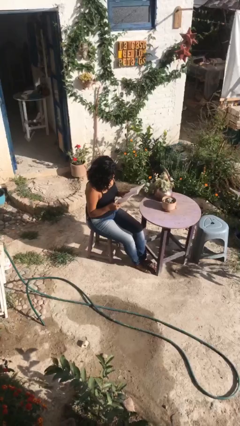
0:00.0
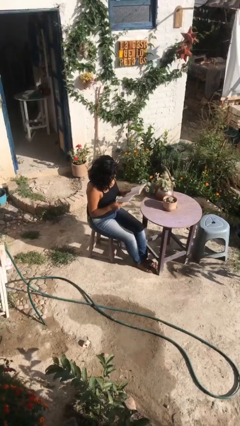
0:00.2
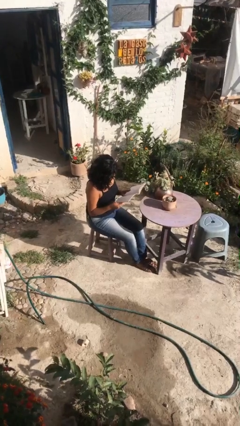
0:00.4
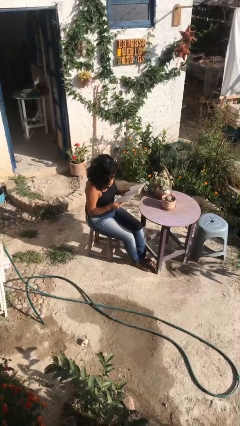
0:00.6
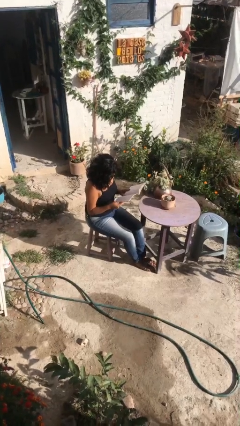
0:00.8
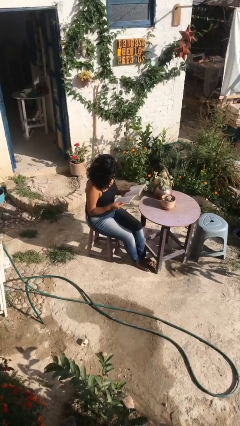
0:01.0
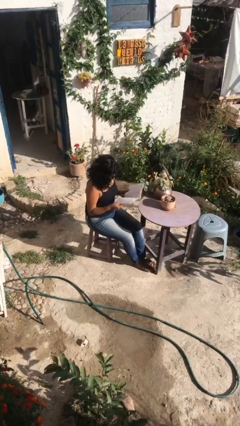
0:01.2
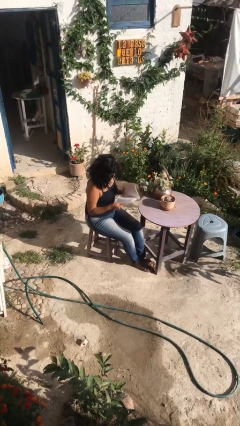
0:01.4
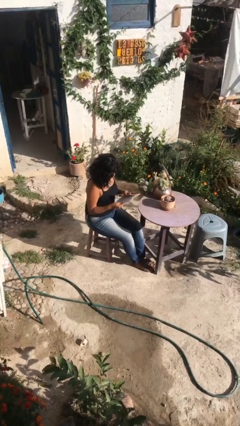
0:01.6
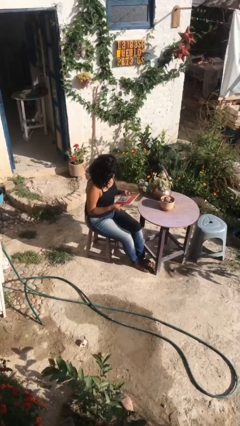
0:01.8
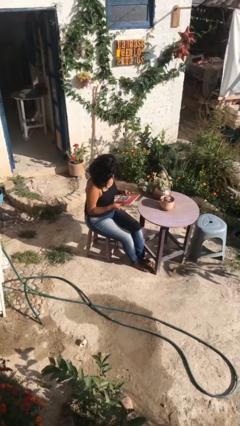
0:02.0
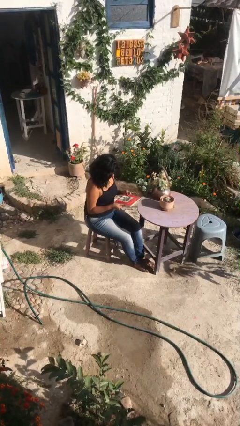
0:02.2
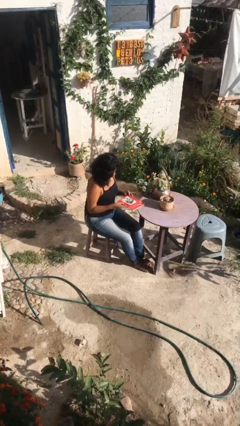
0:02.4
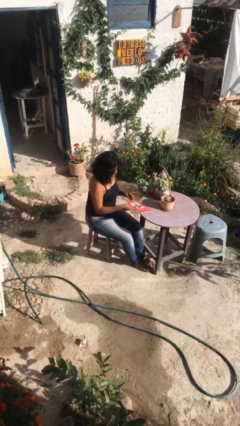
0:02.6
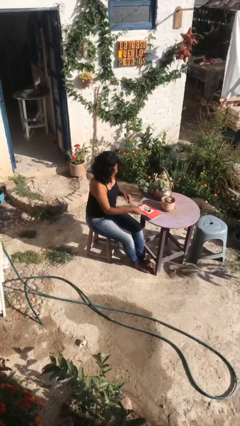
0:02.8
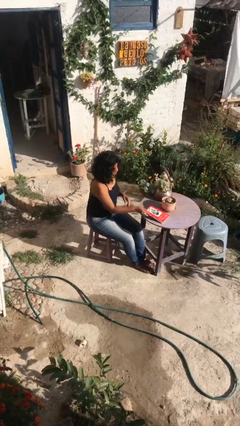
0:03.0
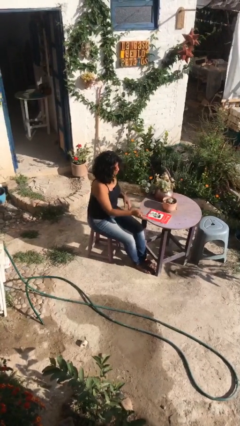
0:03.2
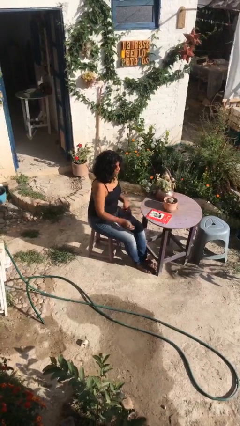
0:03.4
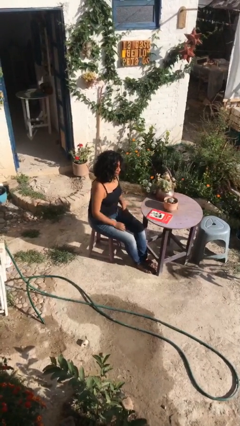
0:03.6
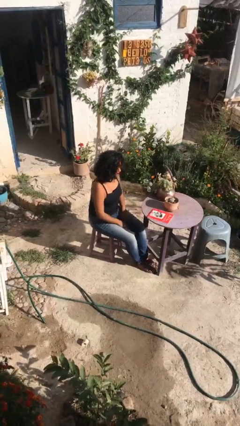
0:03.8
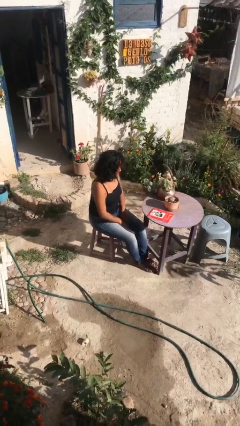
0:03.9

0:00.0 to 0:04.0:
person puts down object on table

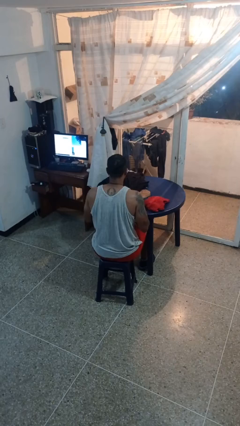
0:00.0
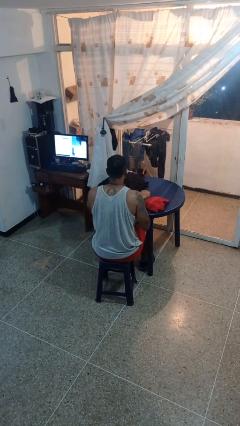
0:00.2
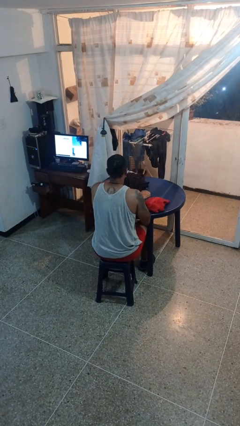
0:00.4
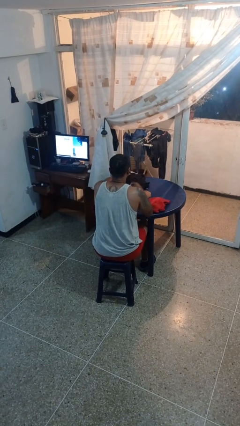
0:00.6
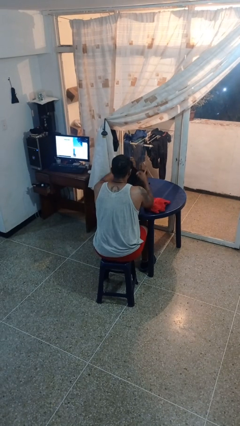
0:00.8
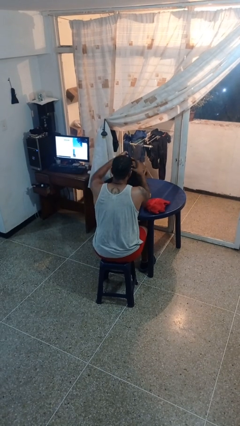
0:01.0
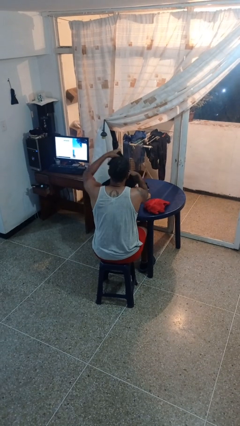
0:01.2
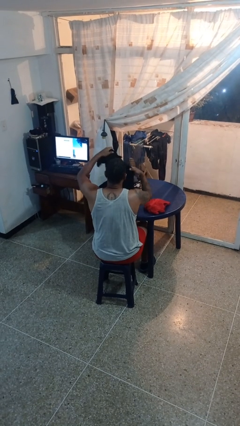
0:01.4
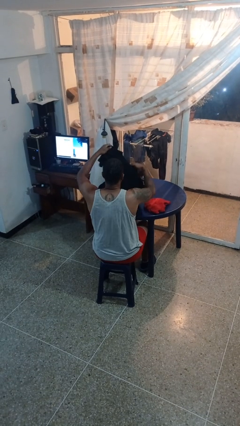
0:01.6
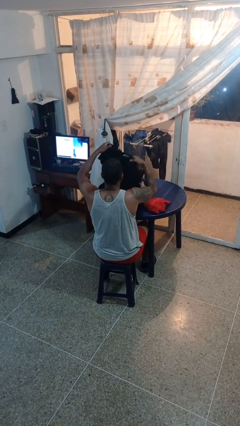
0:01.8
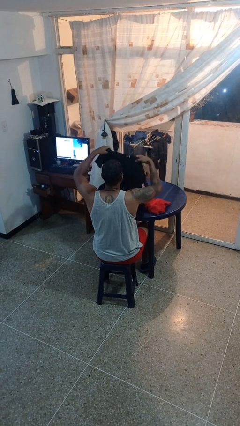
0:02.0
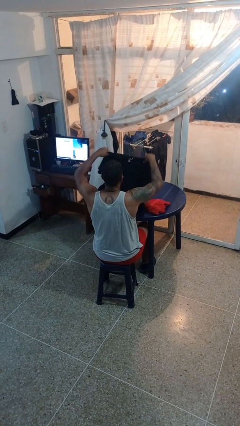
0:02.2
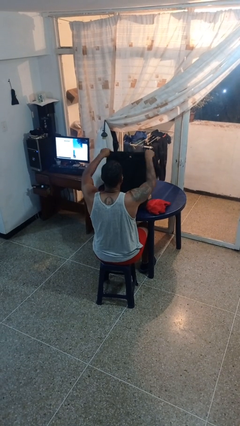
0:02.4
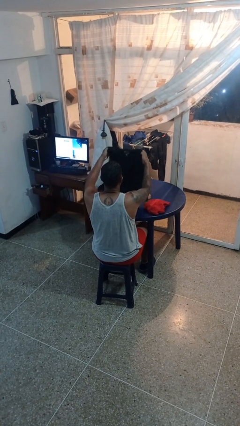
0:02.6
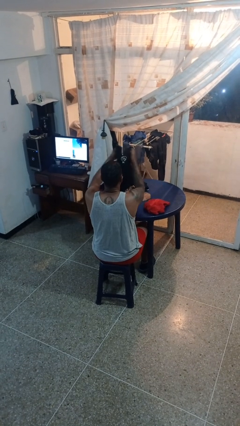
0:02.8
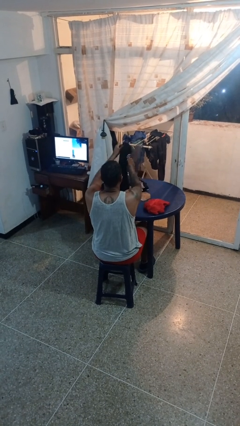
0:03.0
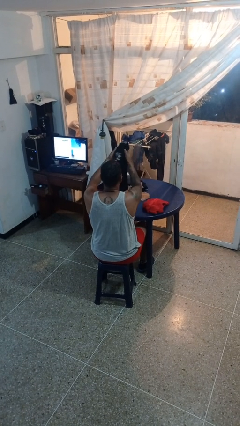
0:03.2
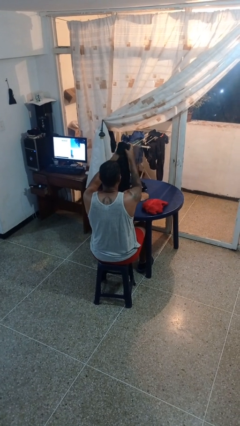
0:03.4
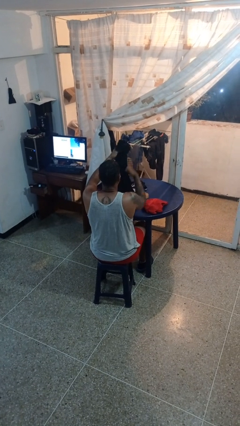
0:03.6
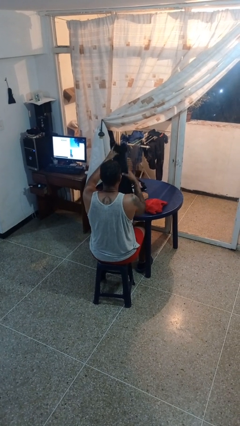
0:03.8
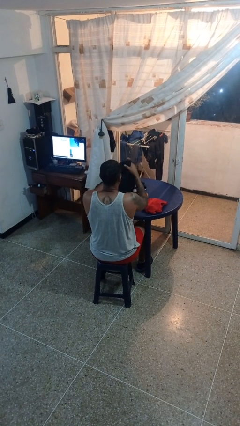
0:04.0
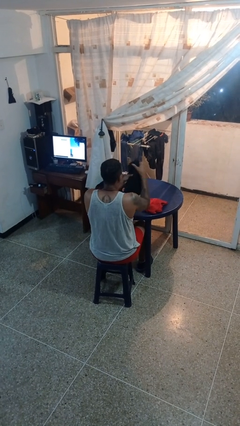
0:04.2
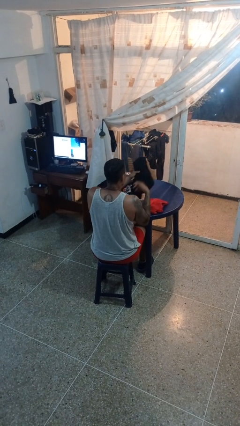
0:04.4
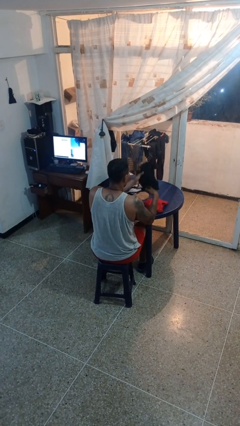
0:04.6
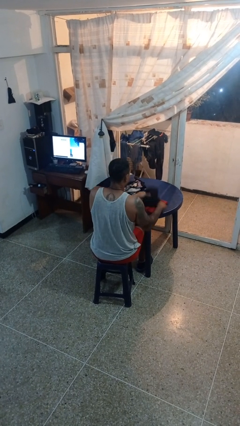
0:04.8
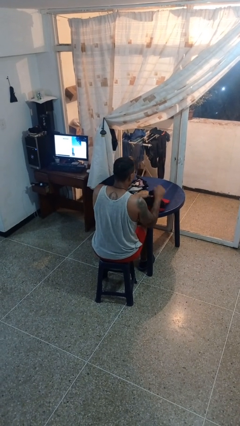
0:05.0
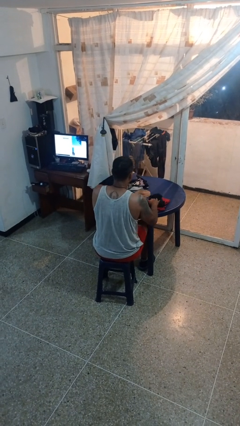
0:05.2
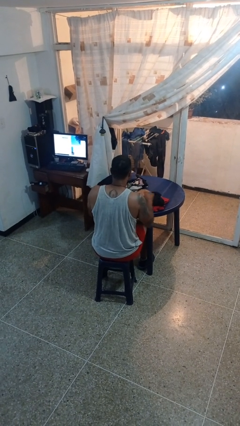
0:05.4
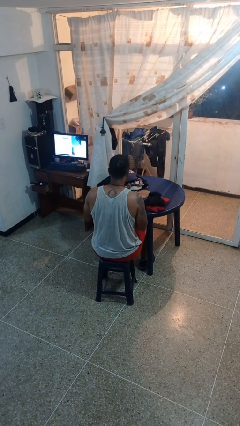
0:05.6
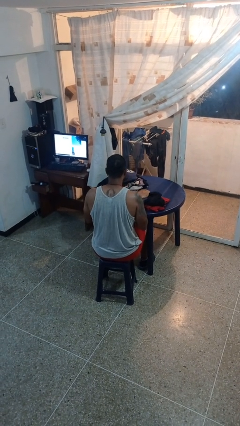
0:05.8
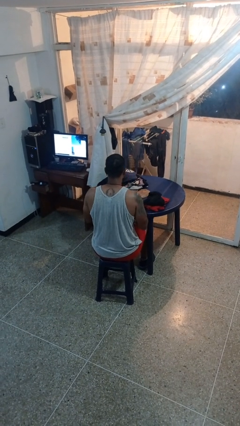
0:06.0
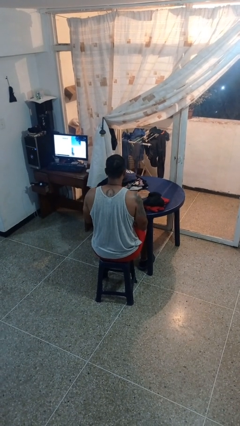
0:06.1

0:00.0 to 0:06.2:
person folds shirt

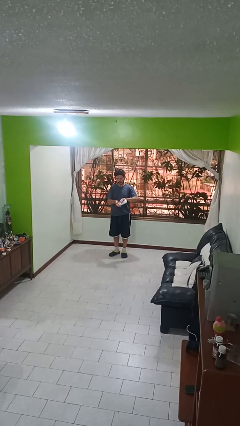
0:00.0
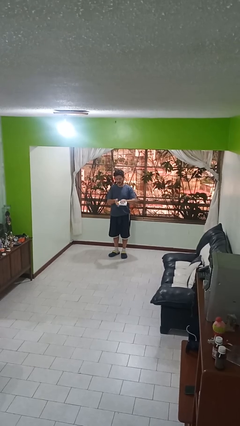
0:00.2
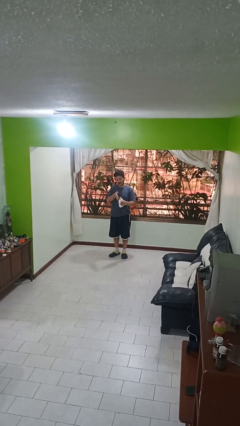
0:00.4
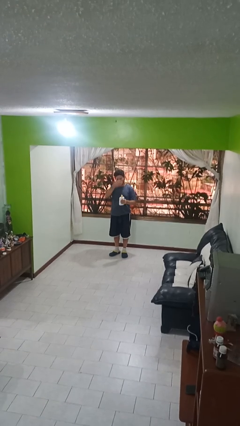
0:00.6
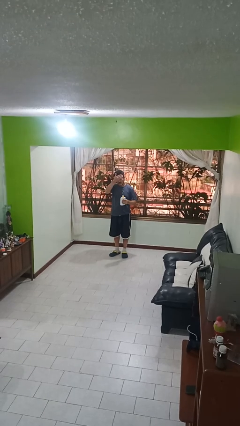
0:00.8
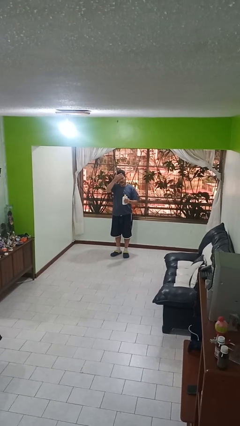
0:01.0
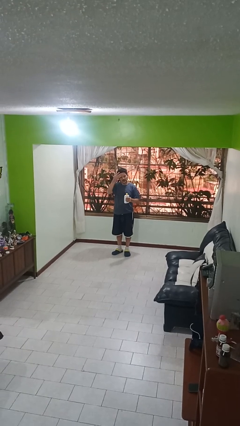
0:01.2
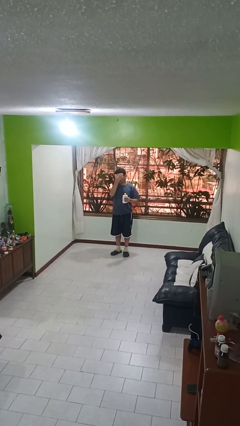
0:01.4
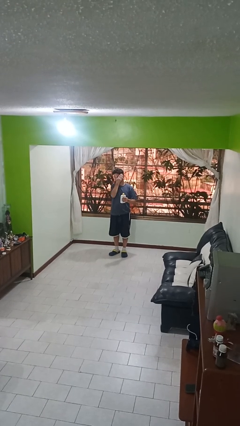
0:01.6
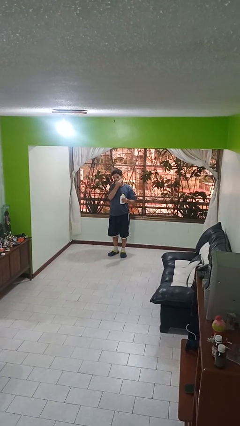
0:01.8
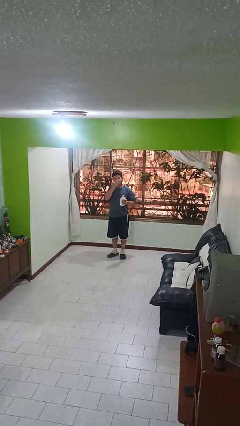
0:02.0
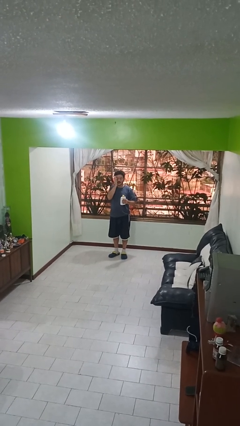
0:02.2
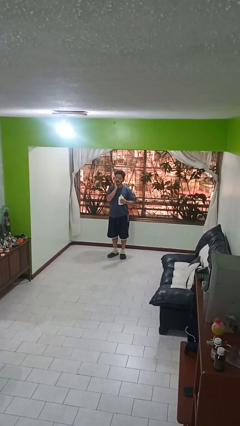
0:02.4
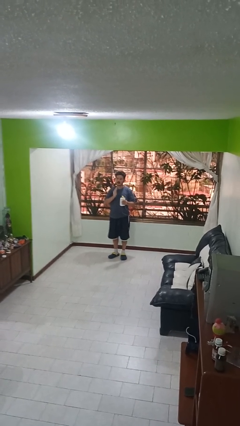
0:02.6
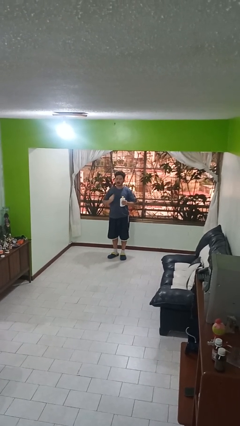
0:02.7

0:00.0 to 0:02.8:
person applies facial moisturizer

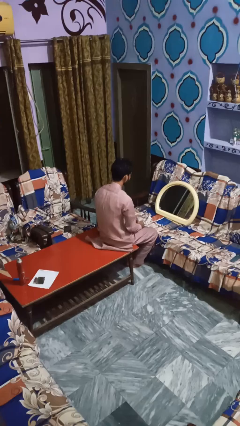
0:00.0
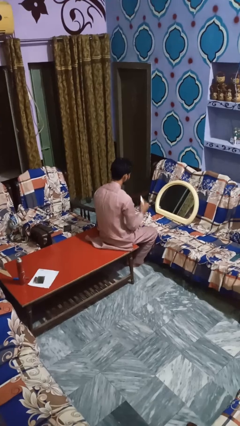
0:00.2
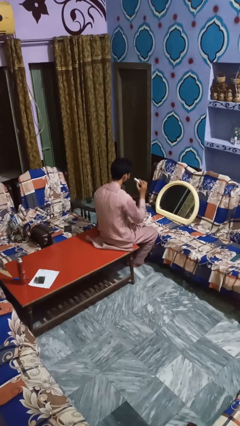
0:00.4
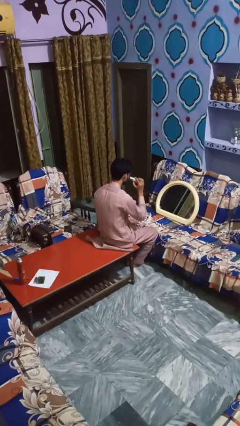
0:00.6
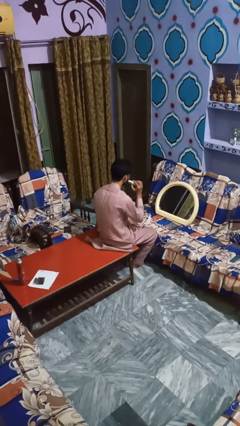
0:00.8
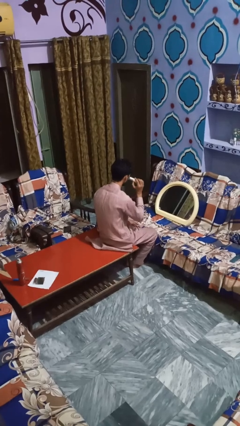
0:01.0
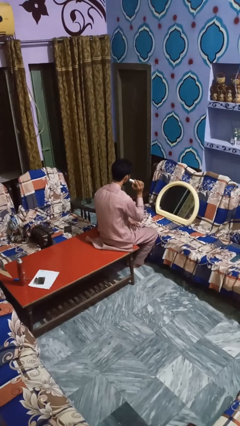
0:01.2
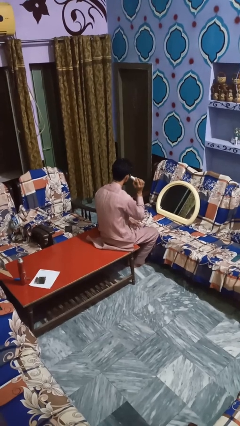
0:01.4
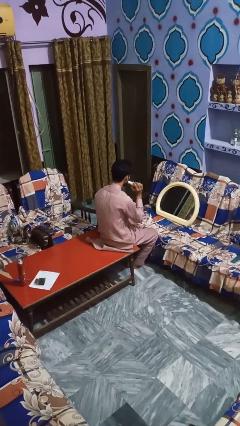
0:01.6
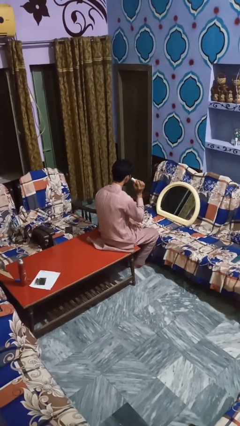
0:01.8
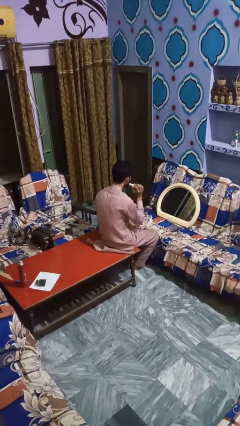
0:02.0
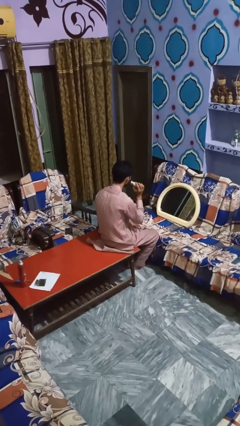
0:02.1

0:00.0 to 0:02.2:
person applies foundation makeup

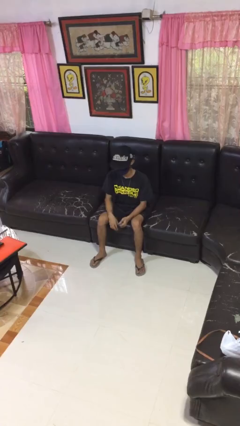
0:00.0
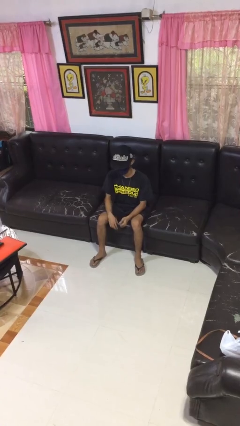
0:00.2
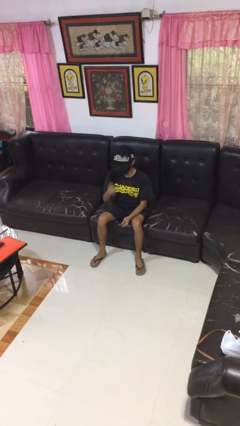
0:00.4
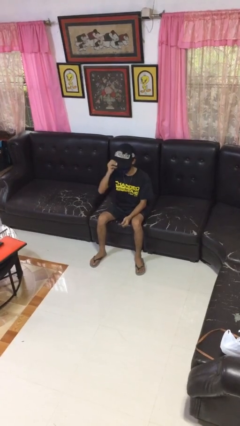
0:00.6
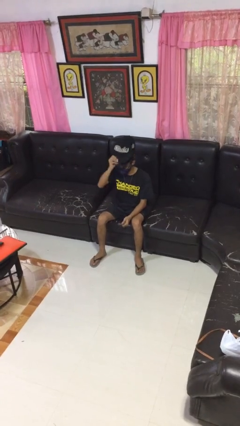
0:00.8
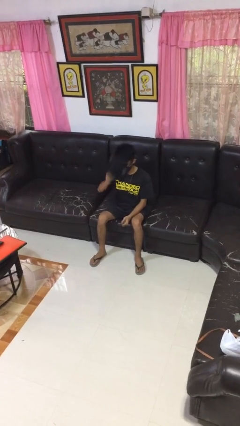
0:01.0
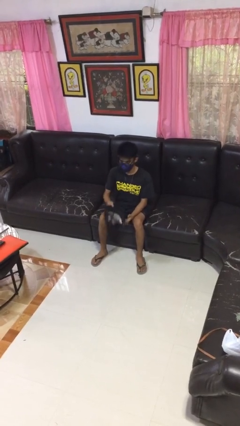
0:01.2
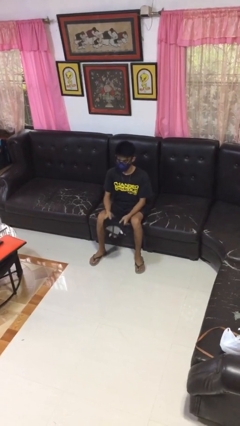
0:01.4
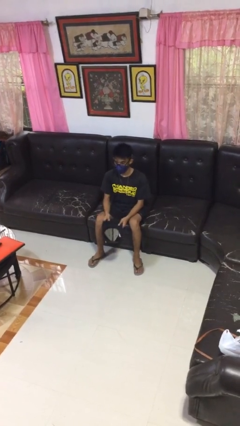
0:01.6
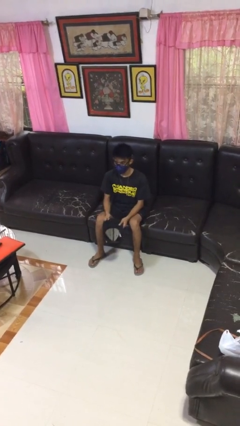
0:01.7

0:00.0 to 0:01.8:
person takes off hat

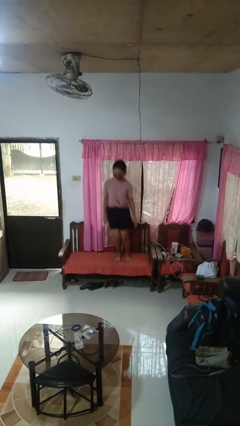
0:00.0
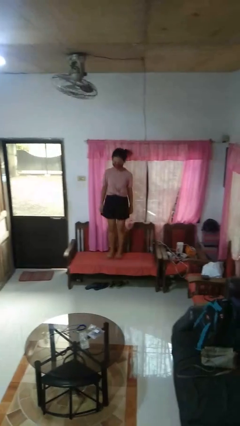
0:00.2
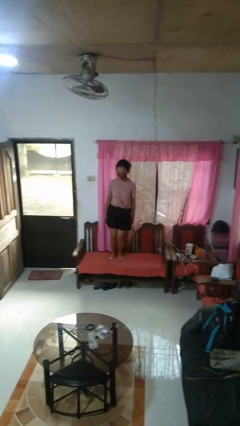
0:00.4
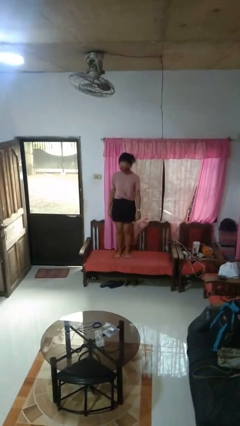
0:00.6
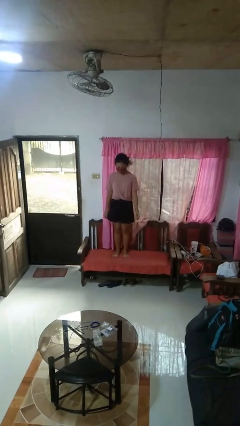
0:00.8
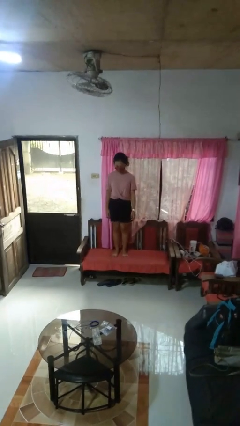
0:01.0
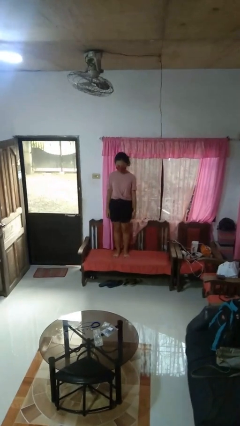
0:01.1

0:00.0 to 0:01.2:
person jumps on couch
